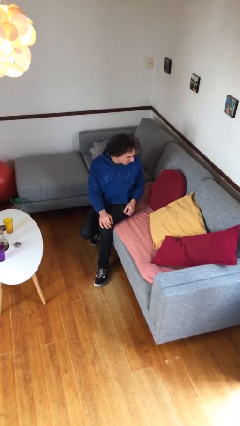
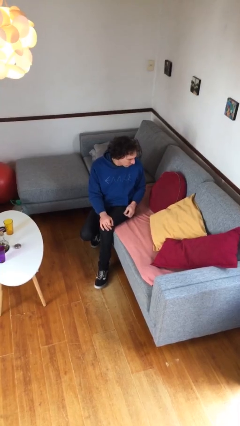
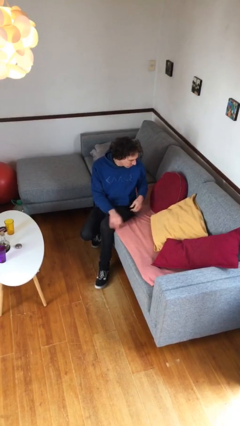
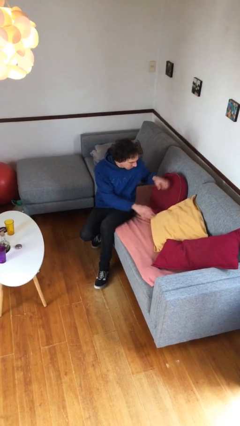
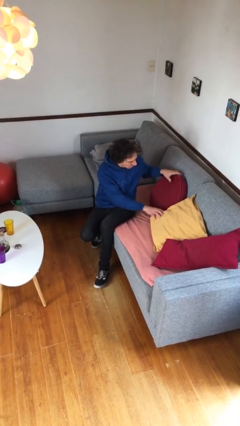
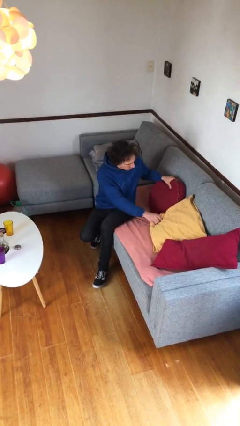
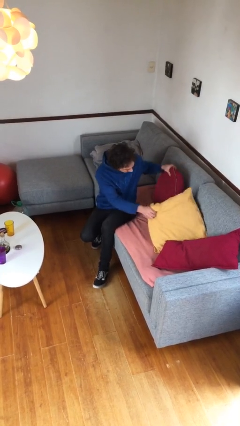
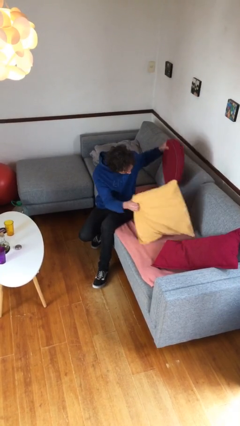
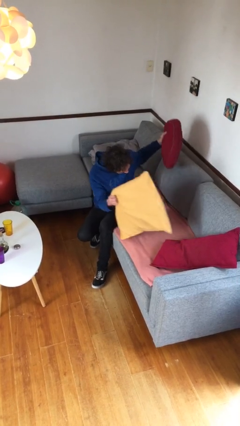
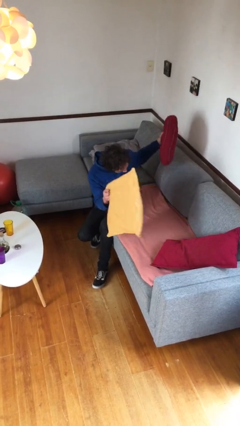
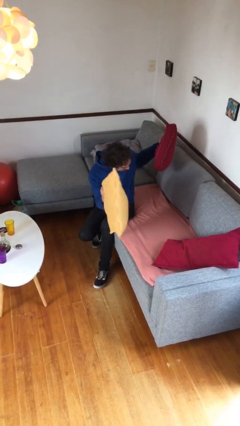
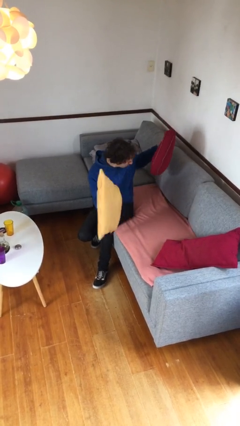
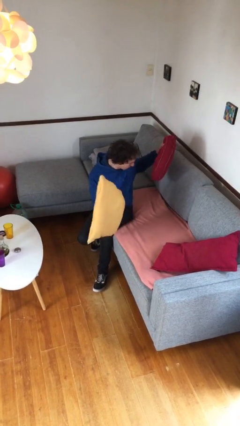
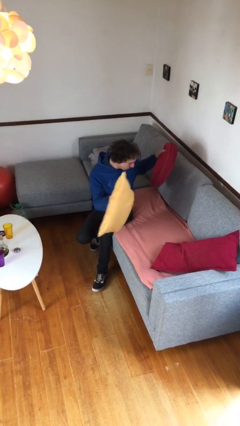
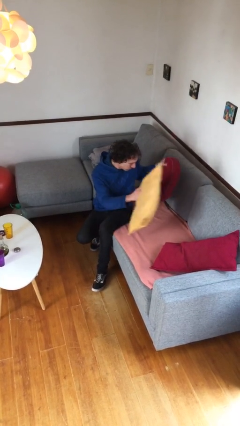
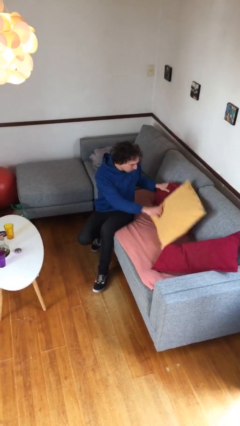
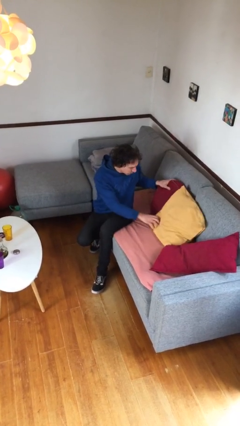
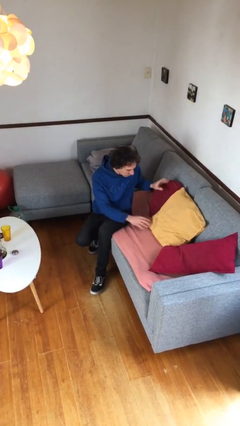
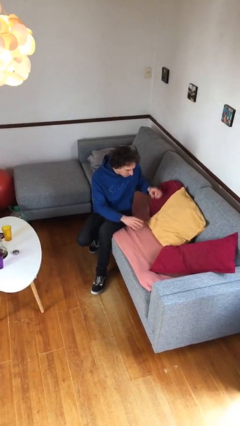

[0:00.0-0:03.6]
person searches in couch

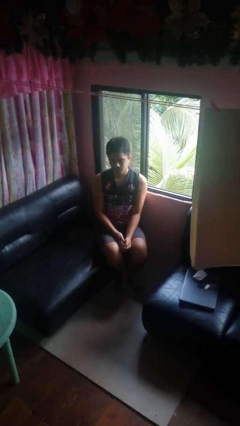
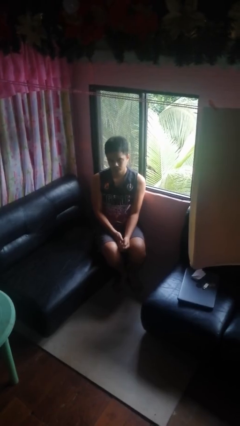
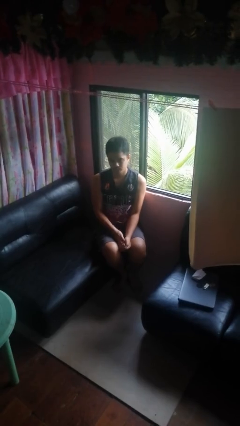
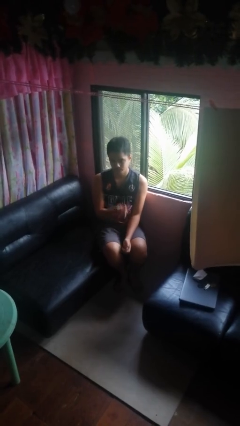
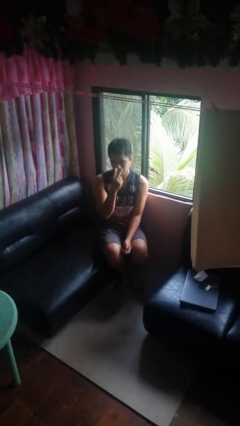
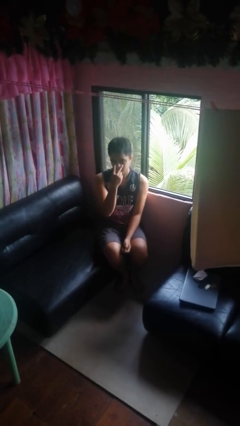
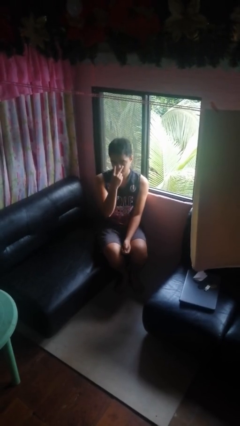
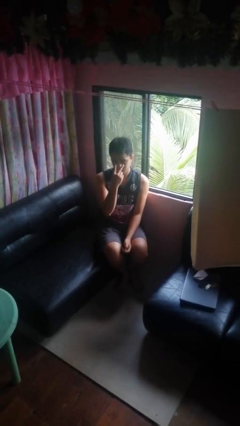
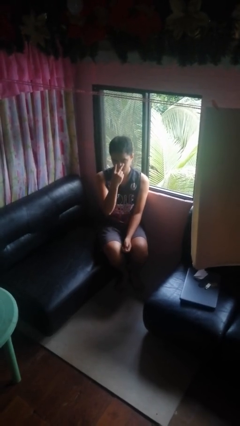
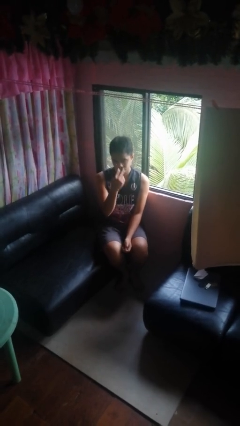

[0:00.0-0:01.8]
person gestures watch closely

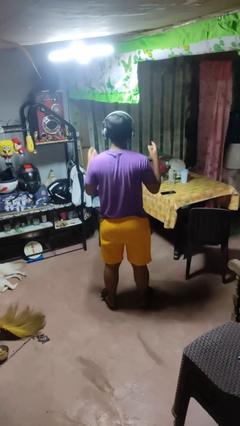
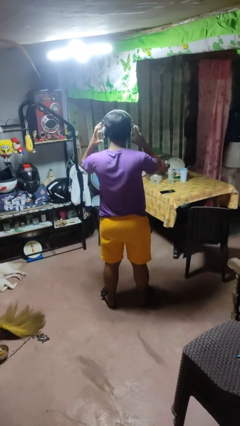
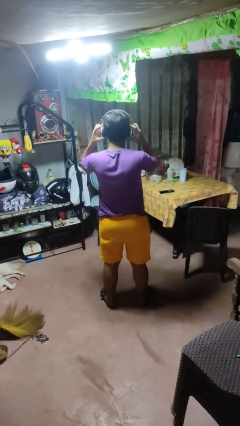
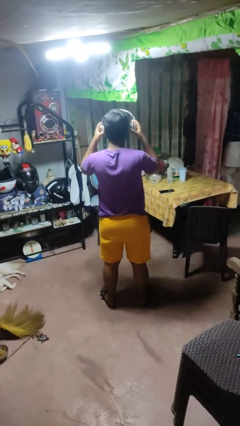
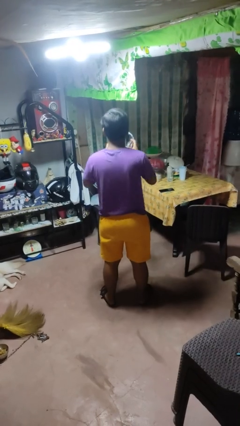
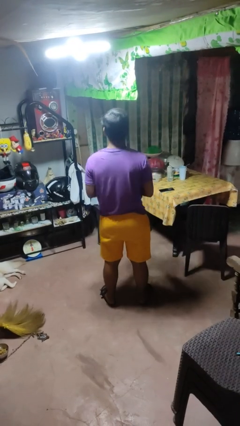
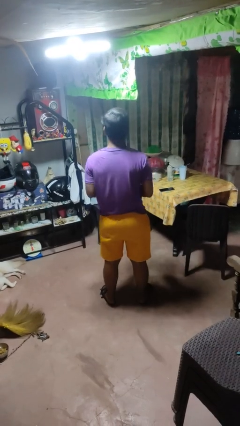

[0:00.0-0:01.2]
person takes off headphones

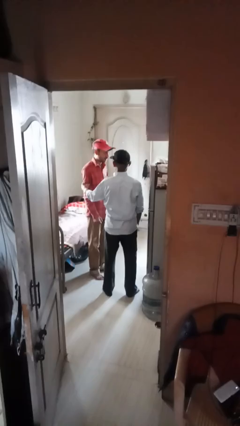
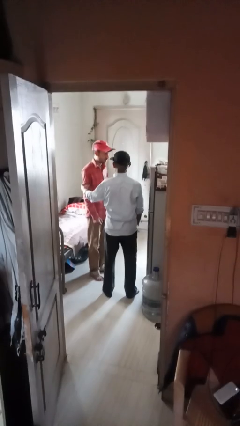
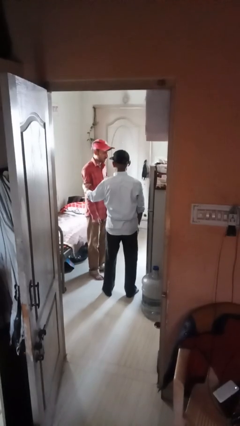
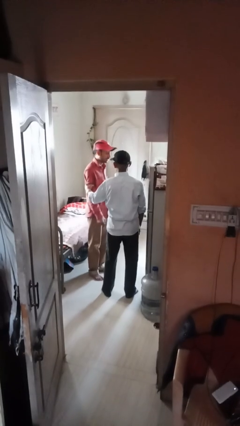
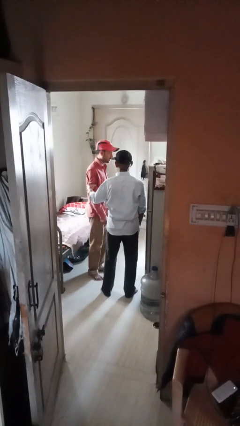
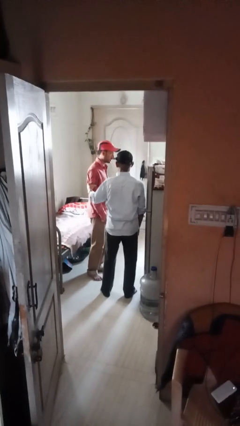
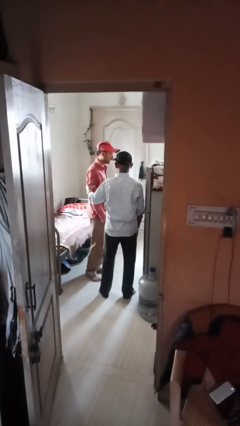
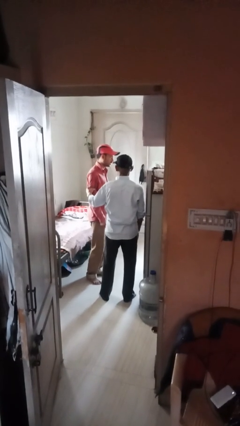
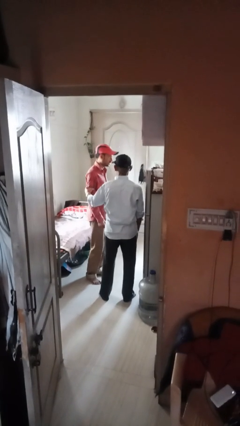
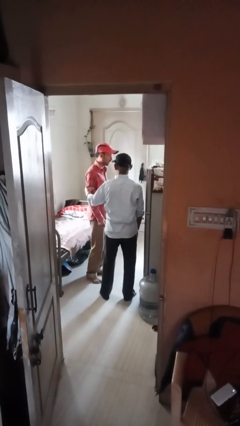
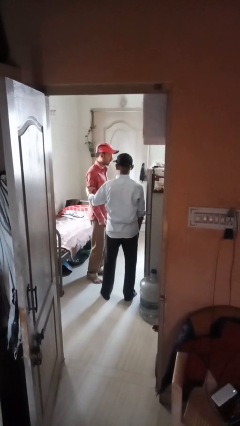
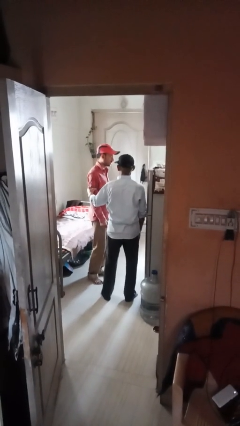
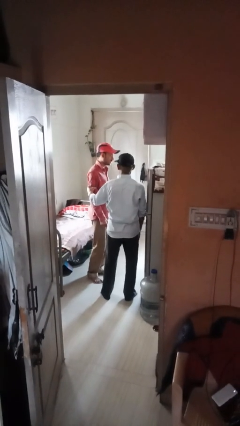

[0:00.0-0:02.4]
person grabs person by shoulder

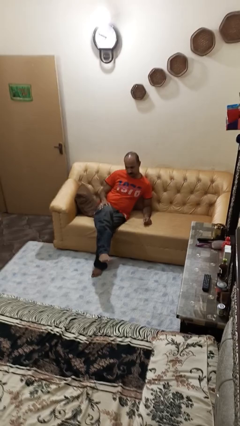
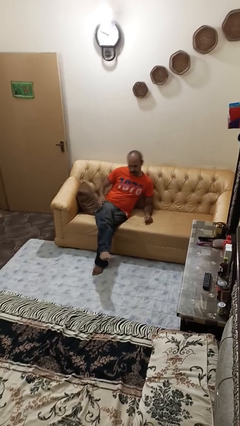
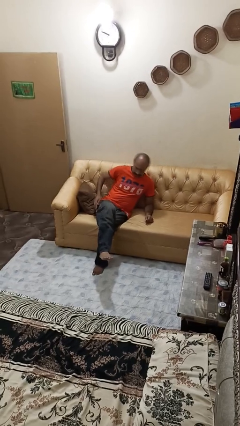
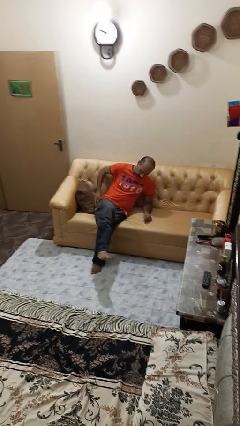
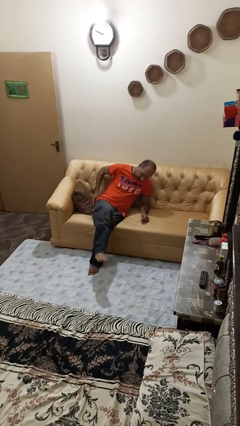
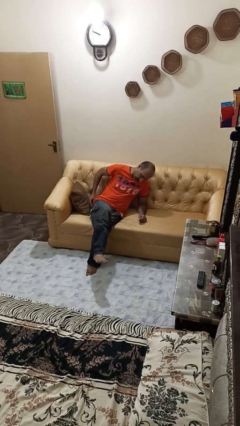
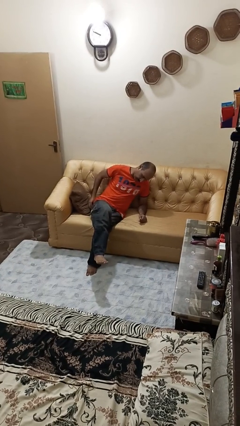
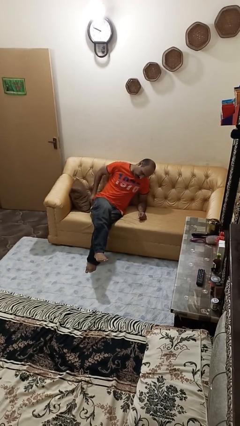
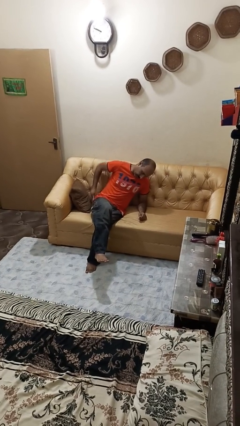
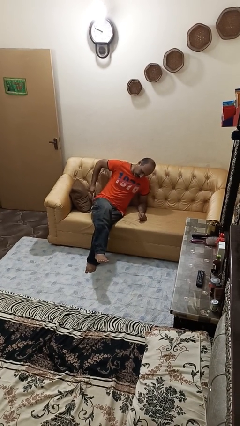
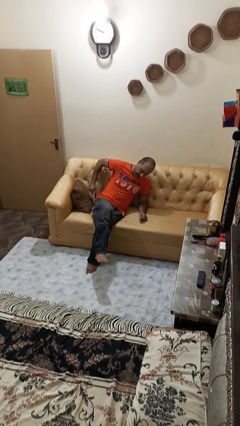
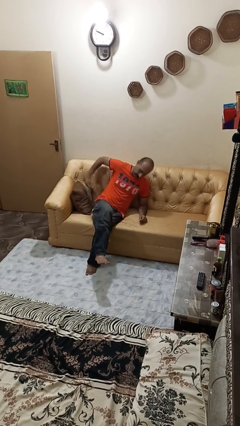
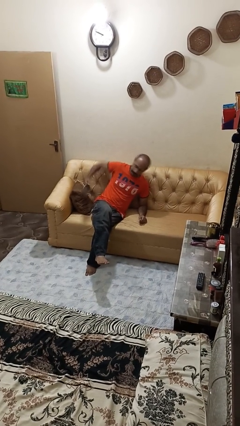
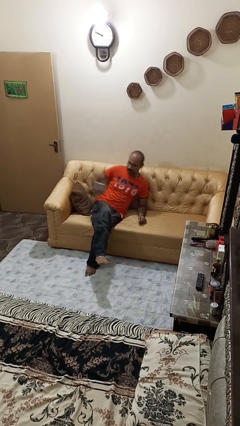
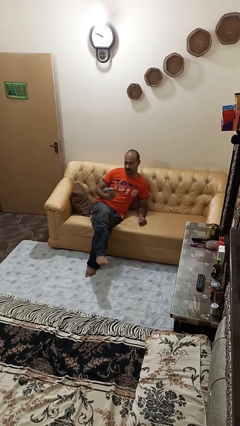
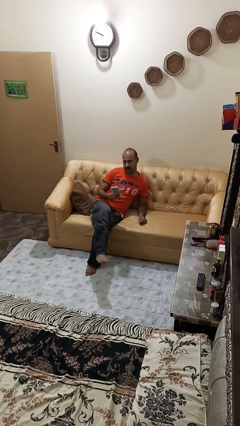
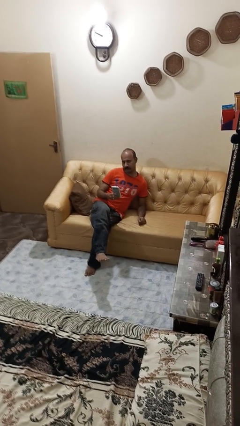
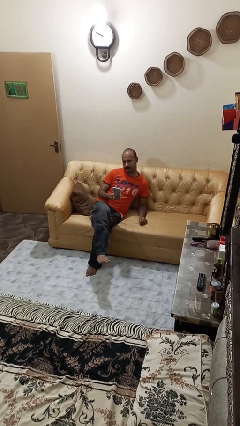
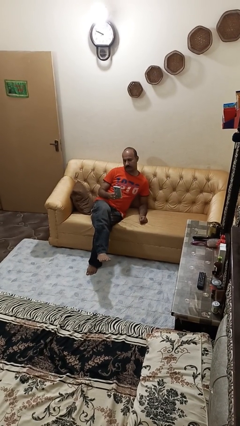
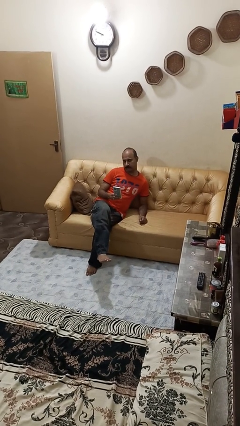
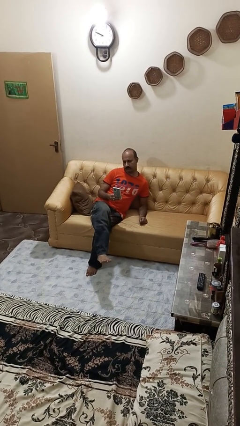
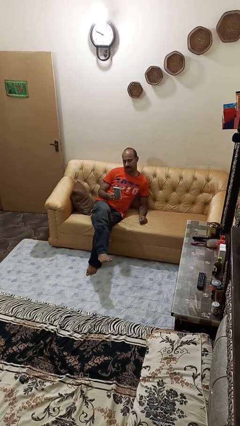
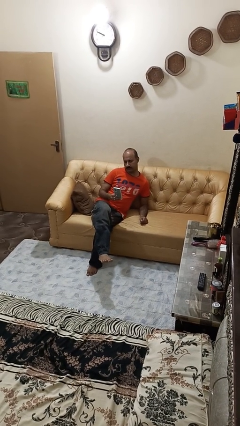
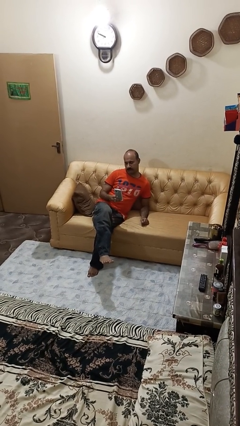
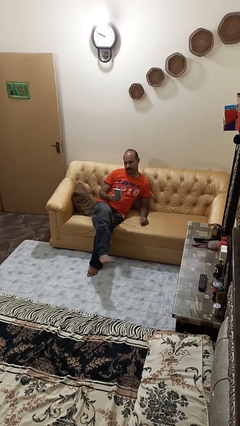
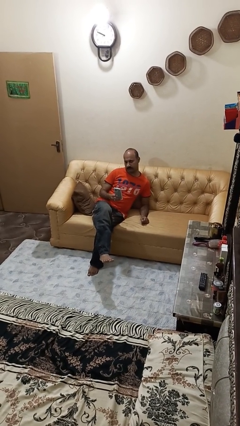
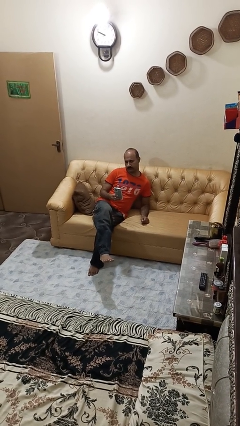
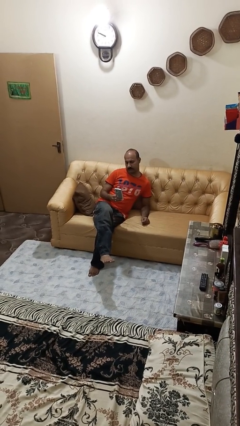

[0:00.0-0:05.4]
person takes phone from pocket

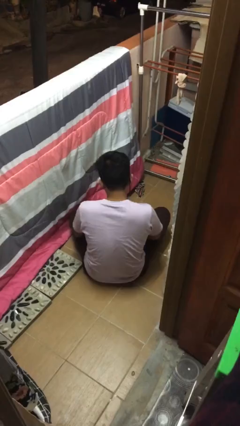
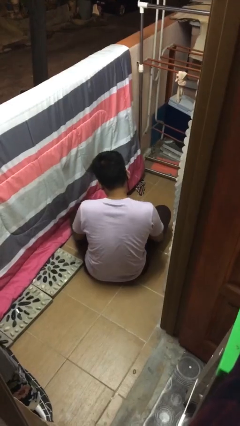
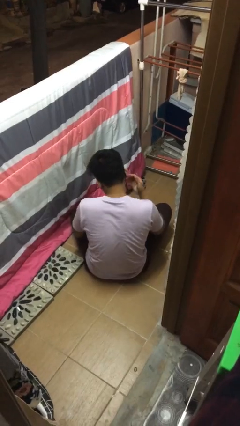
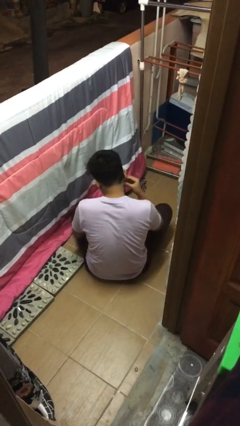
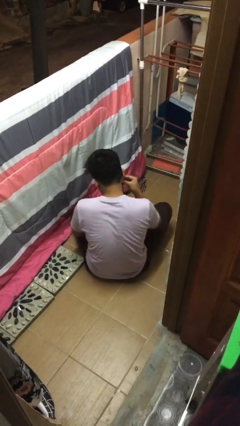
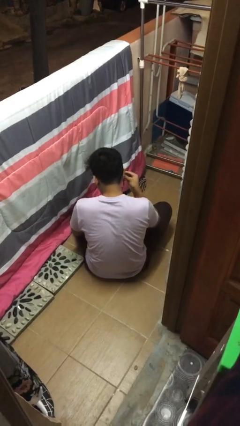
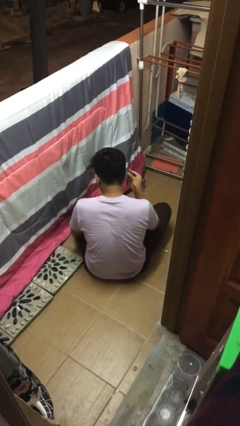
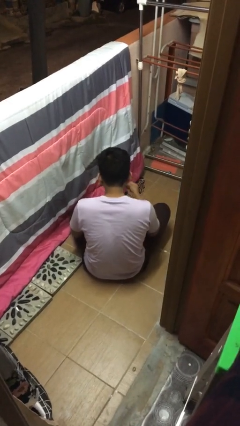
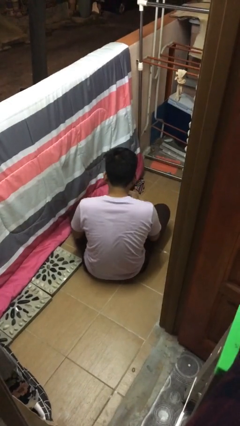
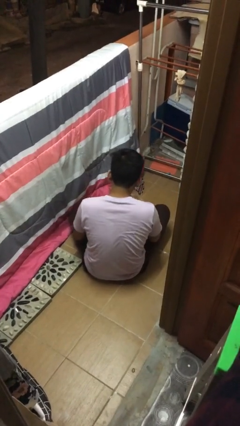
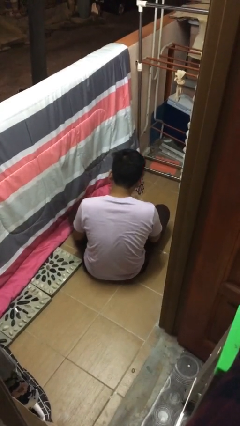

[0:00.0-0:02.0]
person takes off earrings

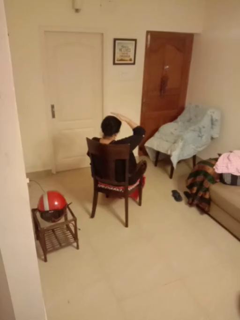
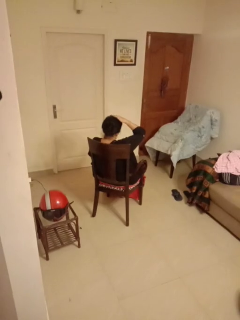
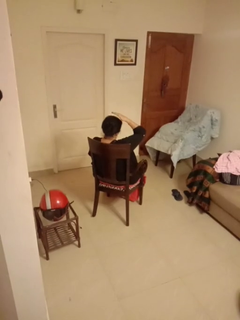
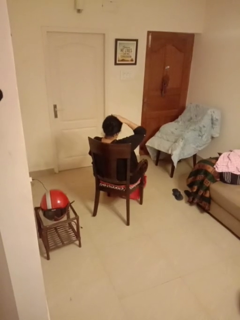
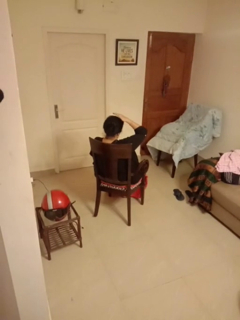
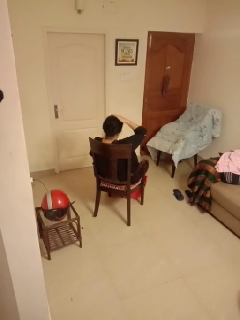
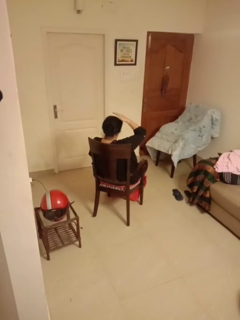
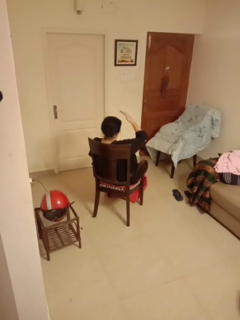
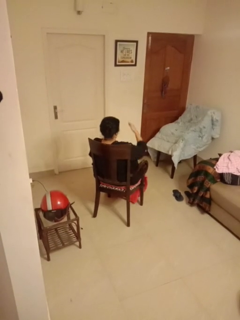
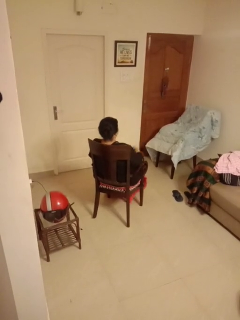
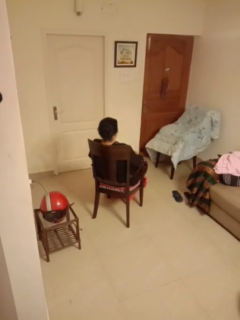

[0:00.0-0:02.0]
person pats head
